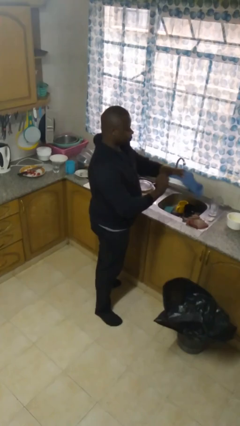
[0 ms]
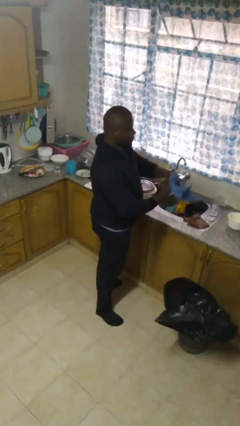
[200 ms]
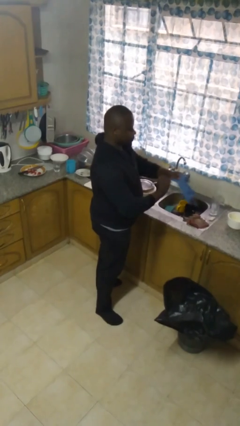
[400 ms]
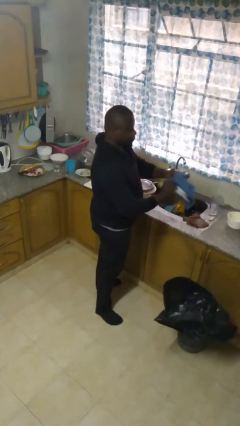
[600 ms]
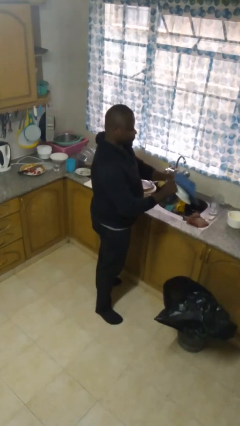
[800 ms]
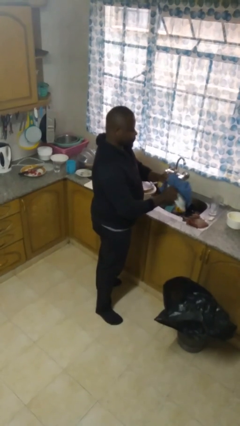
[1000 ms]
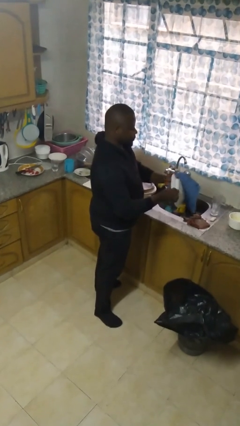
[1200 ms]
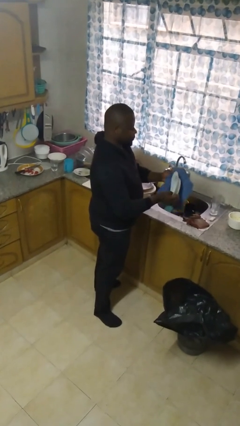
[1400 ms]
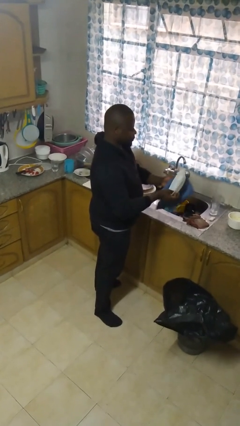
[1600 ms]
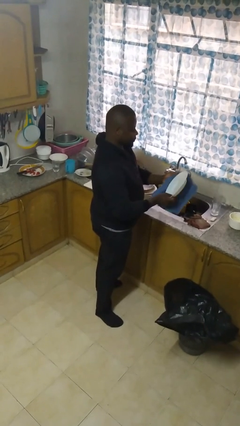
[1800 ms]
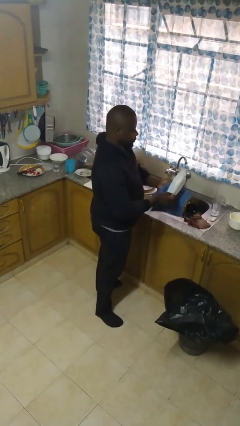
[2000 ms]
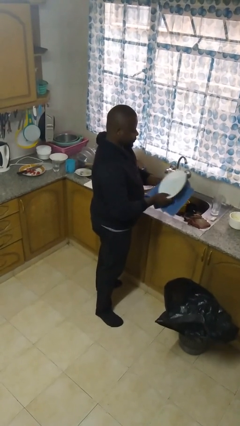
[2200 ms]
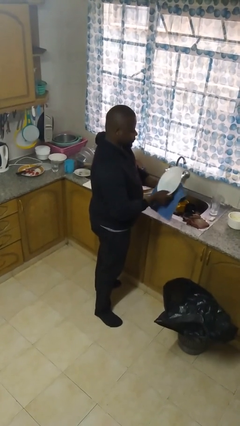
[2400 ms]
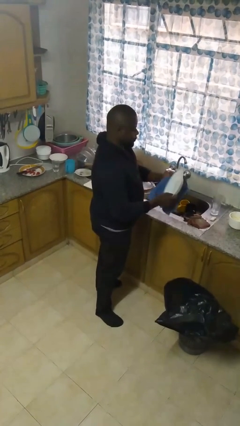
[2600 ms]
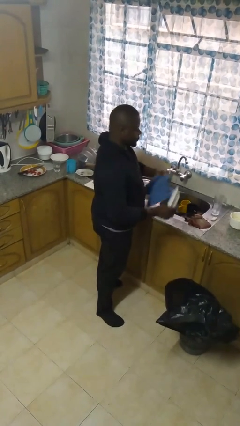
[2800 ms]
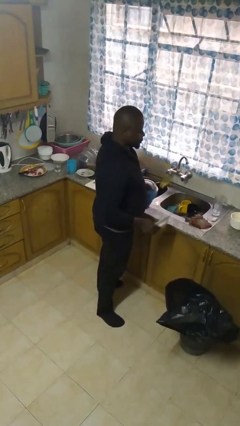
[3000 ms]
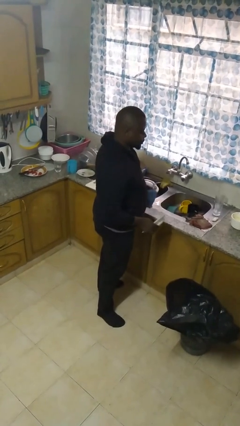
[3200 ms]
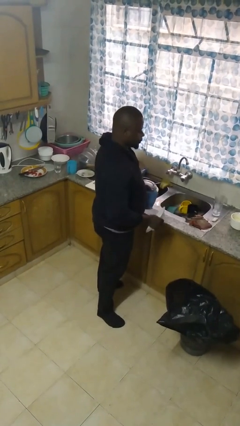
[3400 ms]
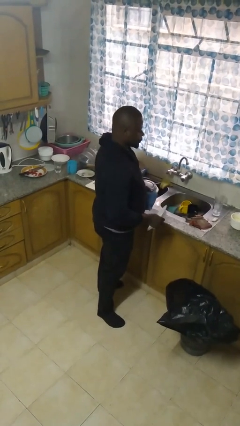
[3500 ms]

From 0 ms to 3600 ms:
person dries dish

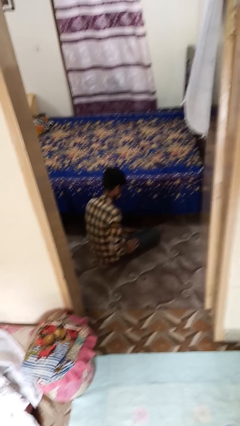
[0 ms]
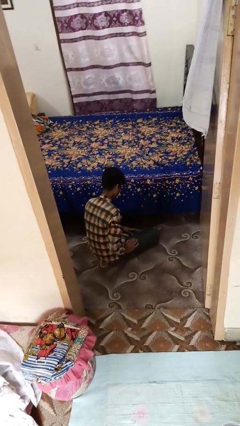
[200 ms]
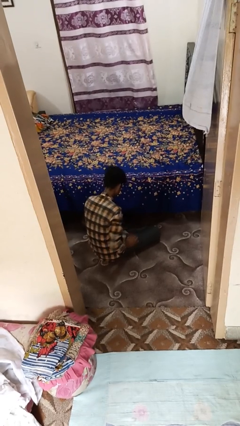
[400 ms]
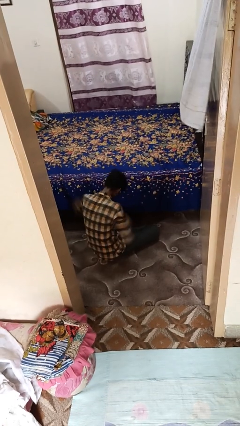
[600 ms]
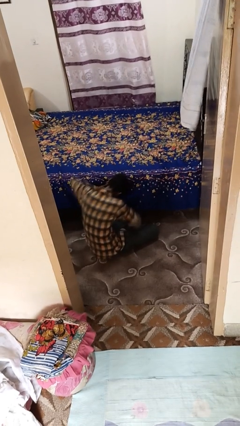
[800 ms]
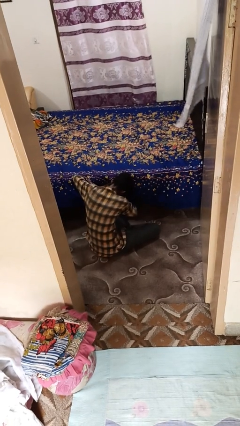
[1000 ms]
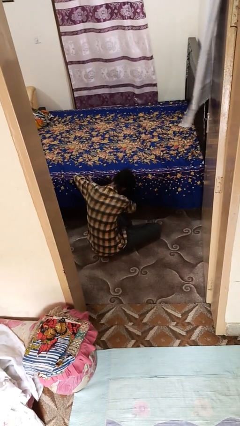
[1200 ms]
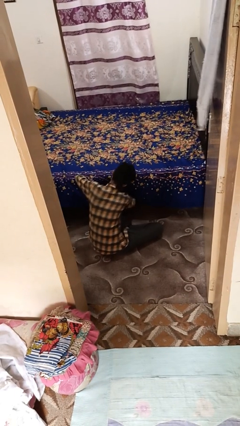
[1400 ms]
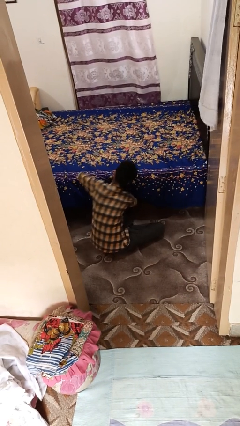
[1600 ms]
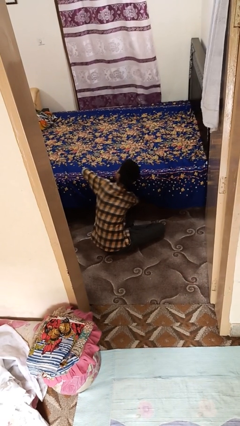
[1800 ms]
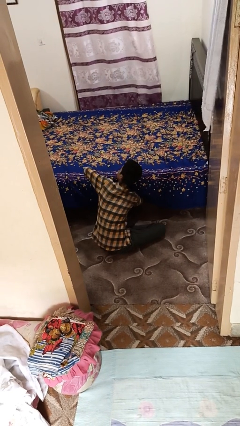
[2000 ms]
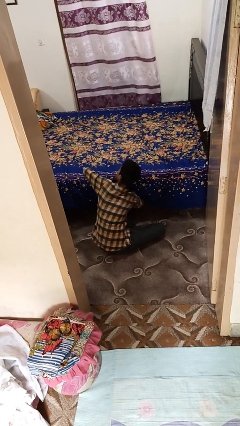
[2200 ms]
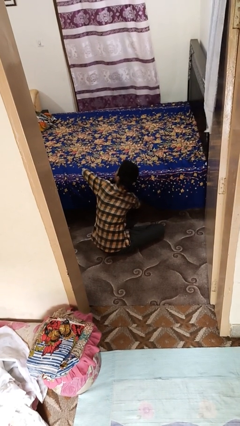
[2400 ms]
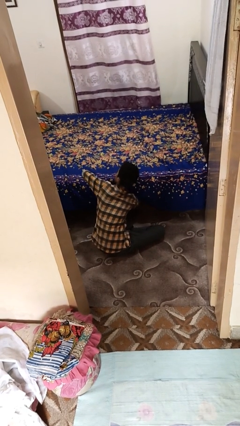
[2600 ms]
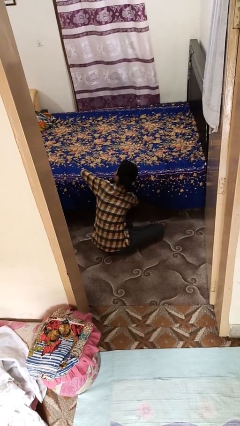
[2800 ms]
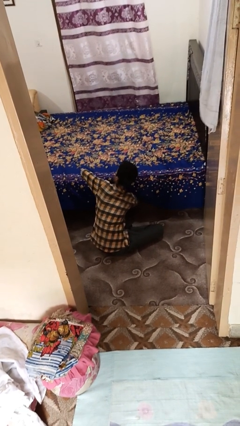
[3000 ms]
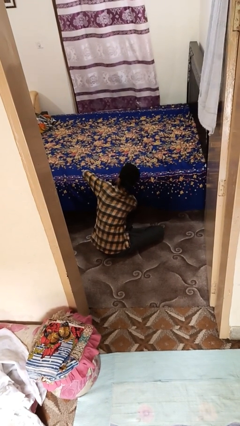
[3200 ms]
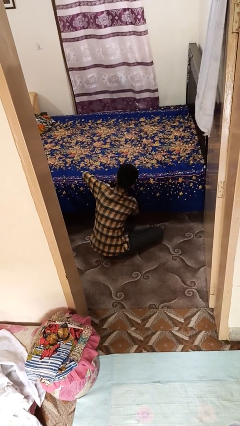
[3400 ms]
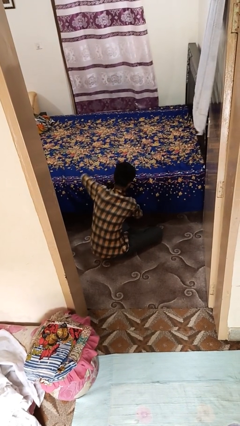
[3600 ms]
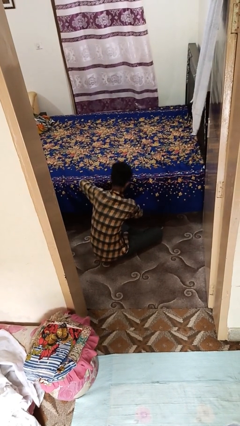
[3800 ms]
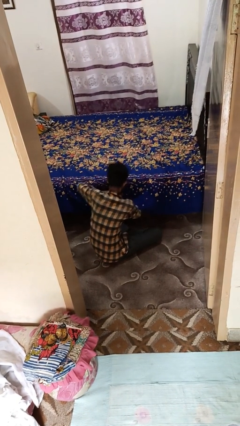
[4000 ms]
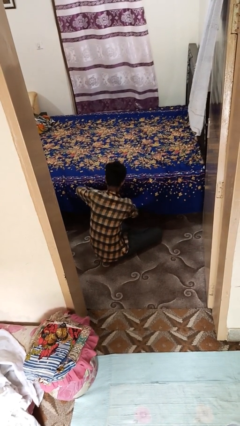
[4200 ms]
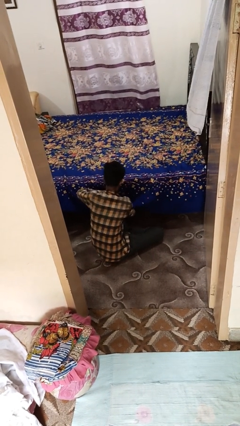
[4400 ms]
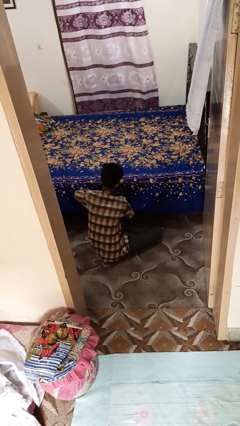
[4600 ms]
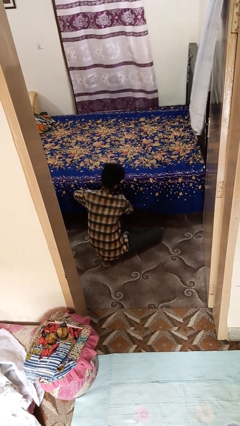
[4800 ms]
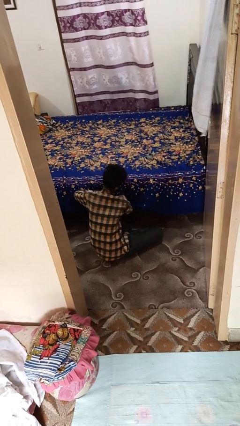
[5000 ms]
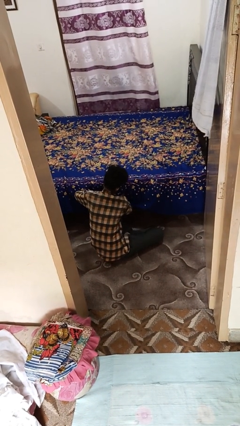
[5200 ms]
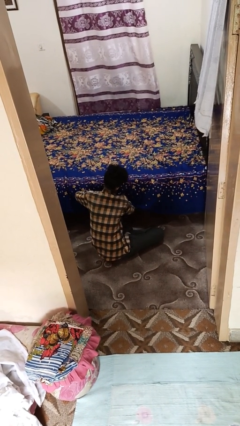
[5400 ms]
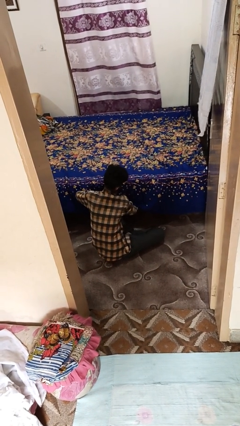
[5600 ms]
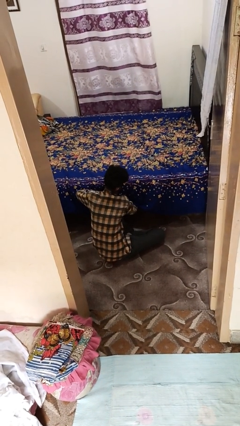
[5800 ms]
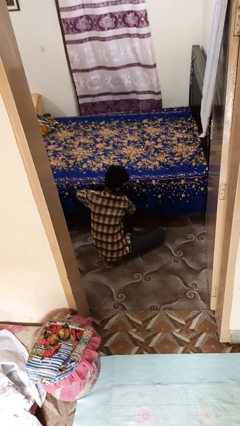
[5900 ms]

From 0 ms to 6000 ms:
person searches under bed

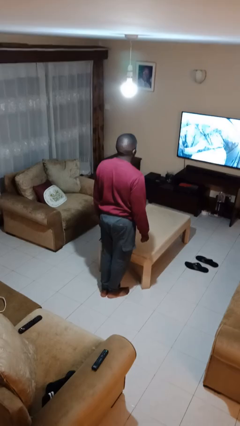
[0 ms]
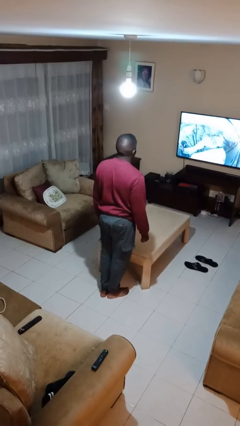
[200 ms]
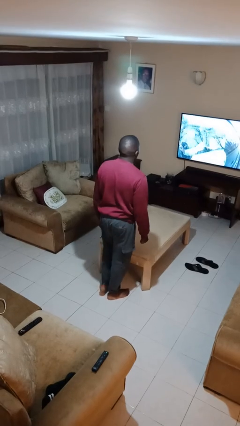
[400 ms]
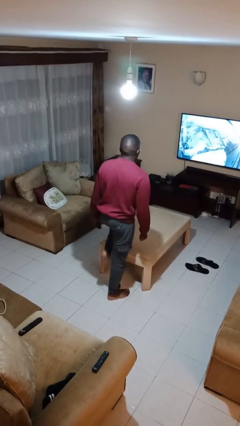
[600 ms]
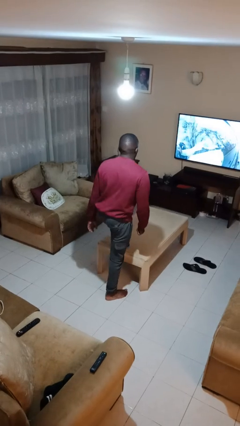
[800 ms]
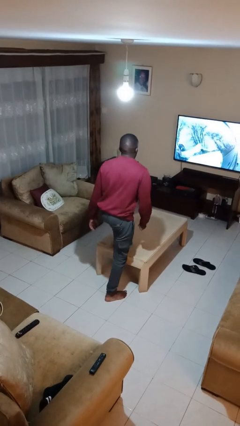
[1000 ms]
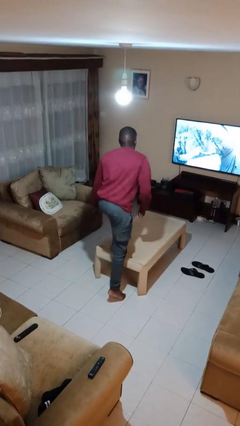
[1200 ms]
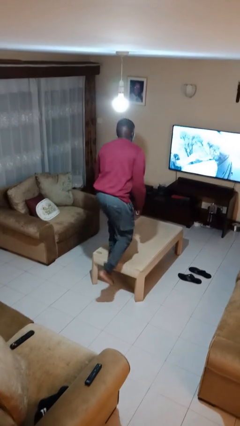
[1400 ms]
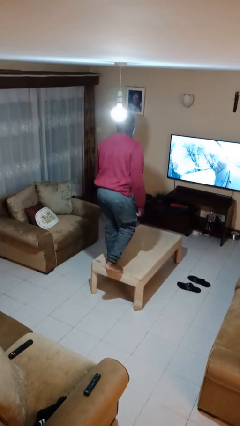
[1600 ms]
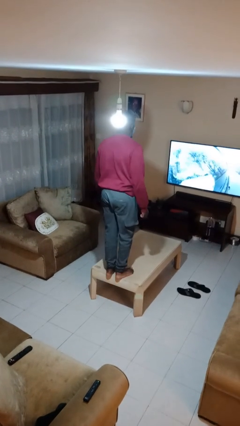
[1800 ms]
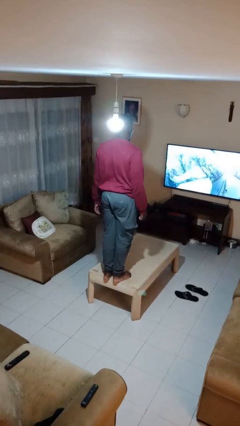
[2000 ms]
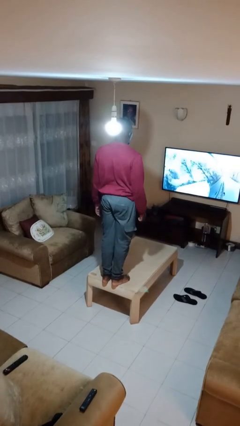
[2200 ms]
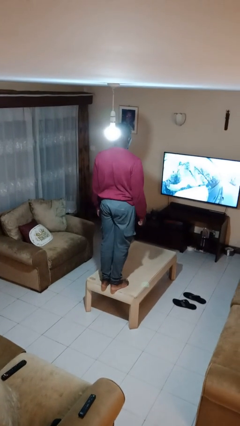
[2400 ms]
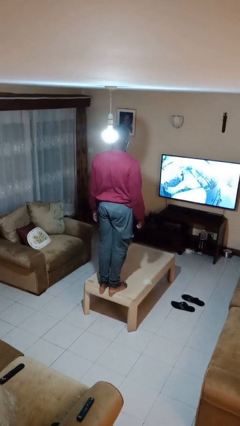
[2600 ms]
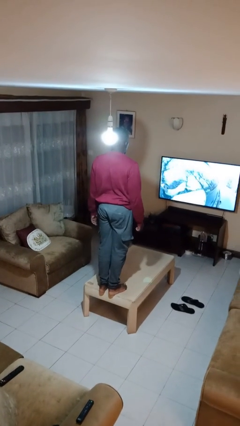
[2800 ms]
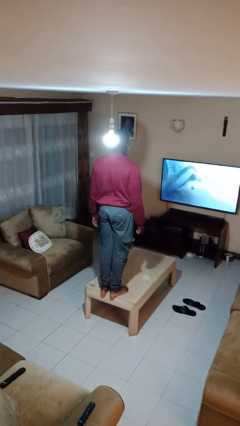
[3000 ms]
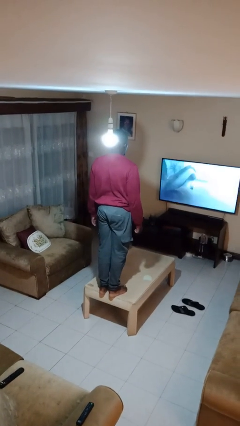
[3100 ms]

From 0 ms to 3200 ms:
person climbs on table

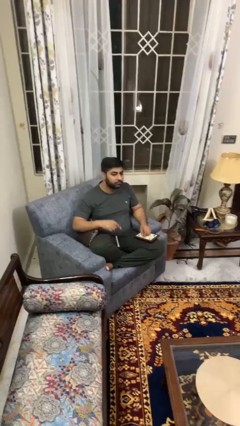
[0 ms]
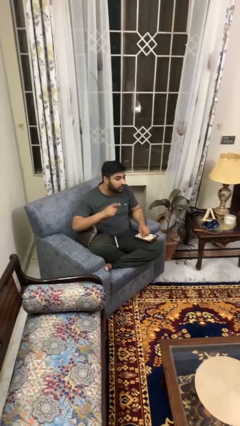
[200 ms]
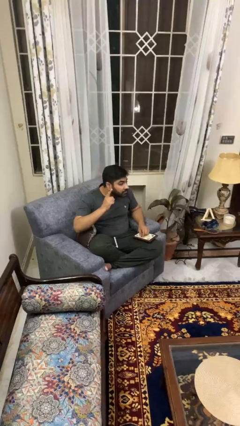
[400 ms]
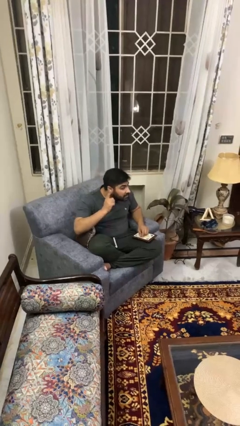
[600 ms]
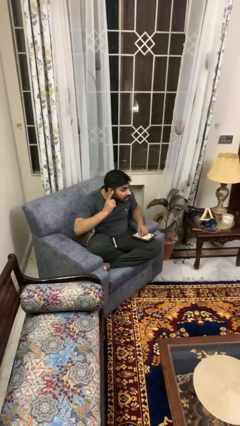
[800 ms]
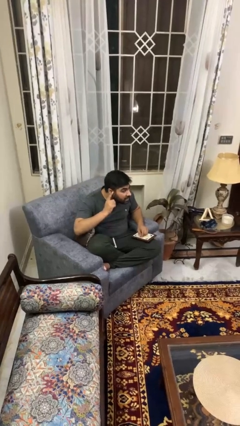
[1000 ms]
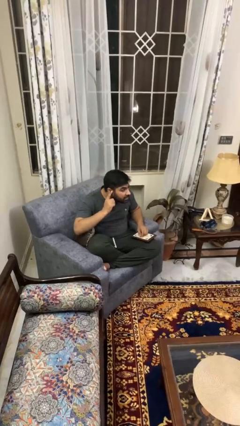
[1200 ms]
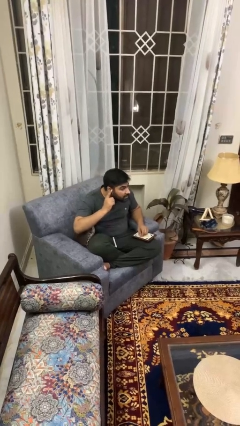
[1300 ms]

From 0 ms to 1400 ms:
person gestures listen closely

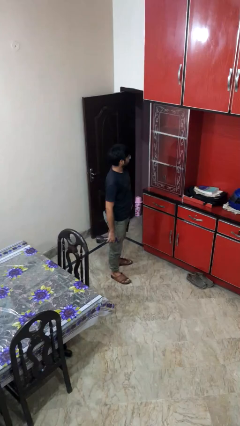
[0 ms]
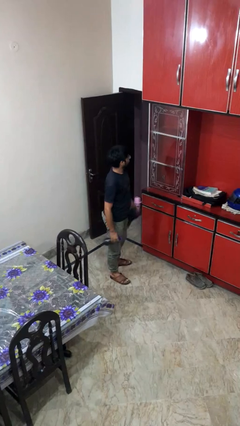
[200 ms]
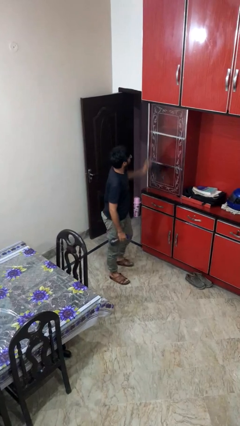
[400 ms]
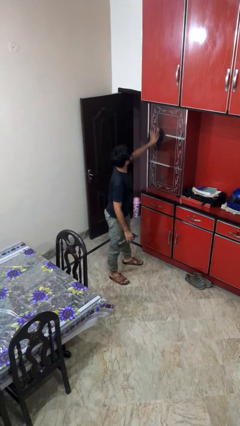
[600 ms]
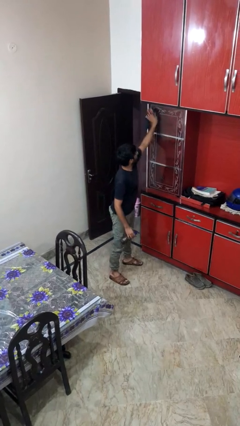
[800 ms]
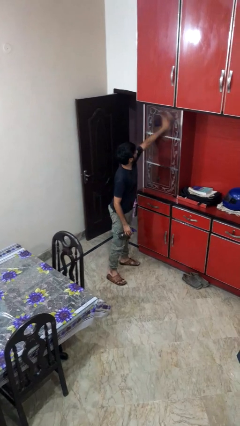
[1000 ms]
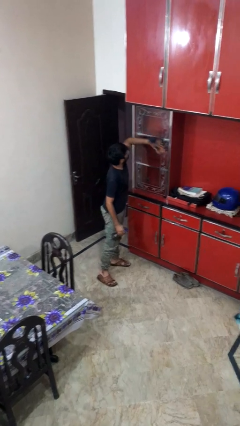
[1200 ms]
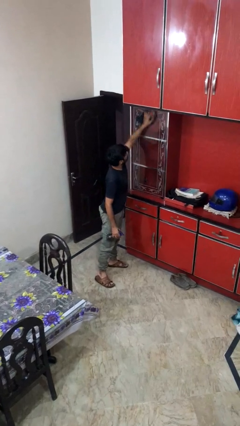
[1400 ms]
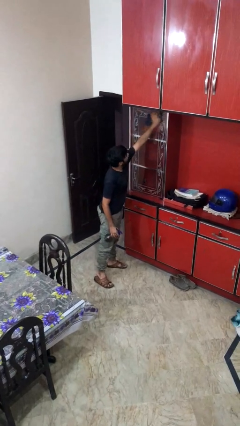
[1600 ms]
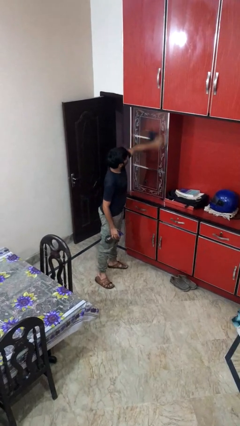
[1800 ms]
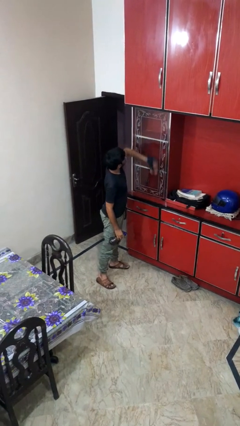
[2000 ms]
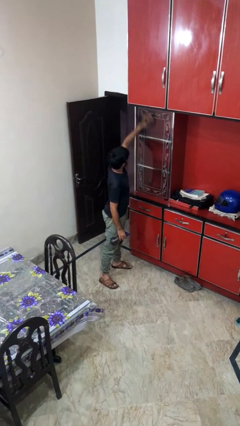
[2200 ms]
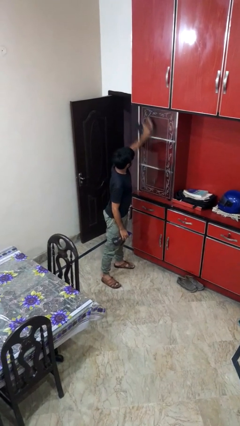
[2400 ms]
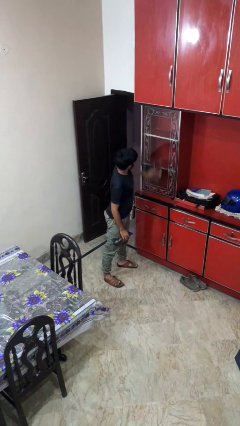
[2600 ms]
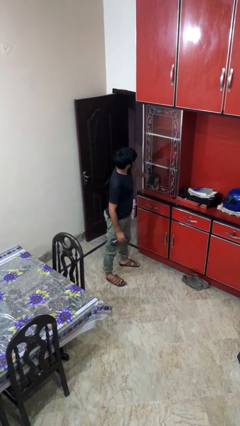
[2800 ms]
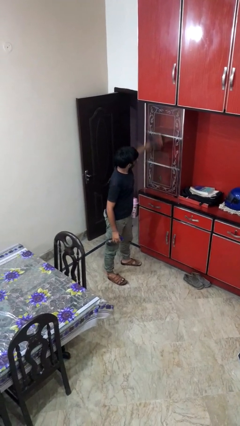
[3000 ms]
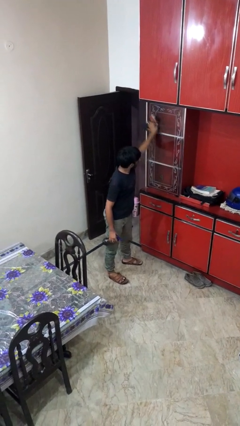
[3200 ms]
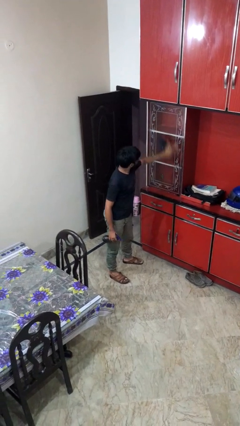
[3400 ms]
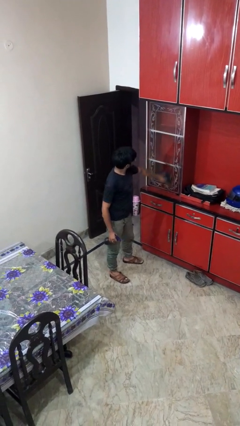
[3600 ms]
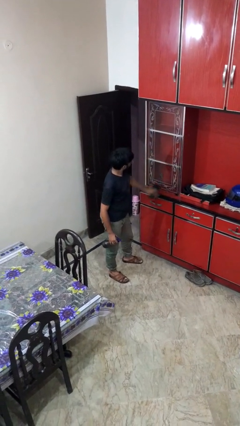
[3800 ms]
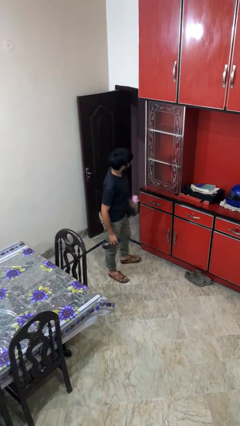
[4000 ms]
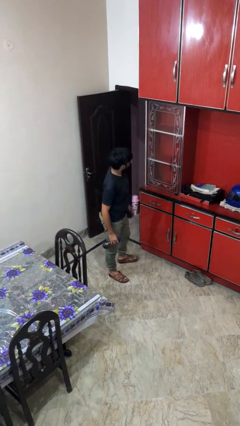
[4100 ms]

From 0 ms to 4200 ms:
person washes window
